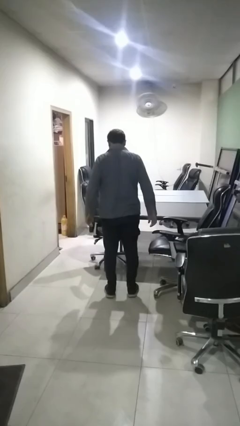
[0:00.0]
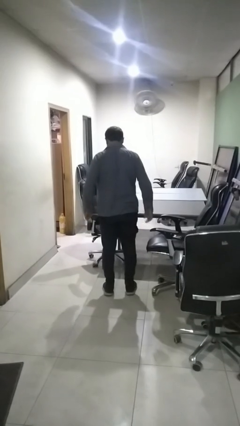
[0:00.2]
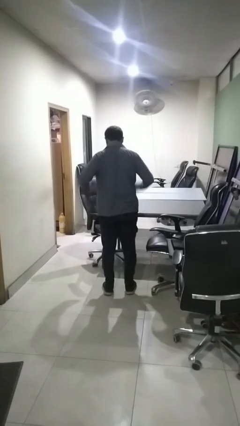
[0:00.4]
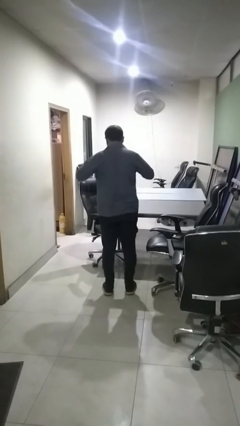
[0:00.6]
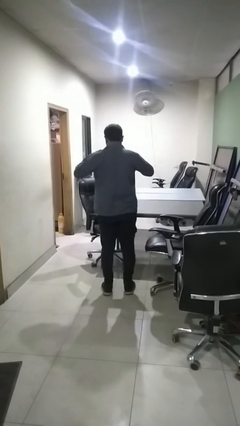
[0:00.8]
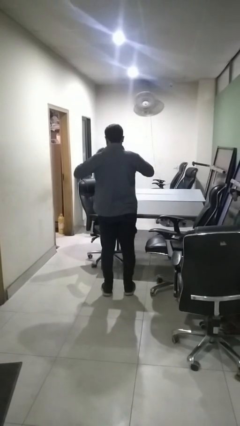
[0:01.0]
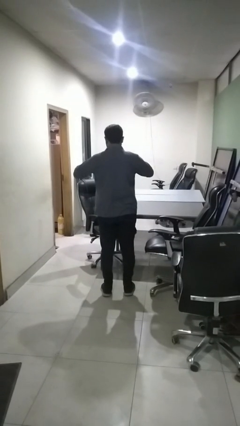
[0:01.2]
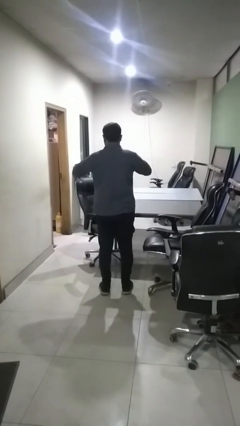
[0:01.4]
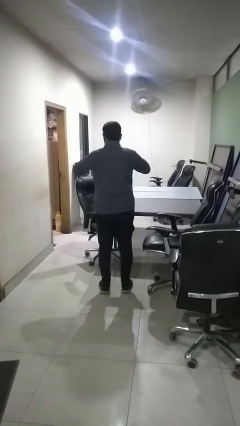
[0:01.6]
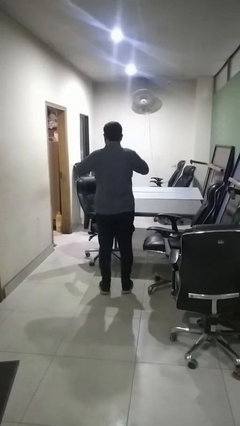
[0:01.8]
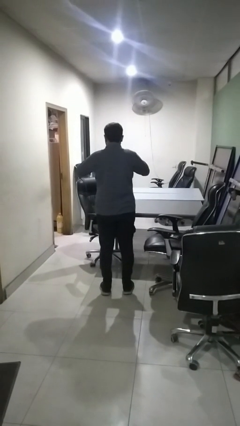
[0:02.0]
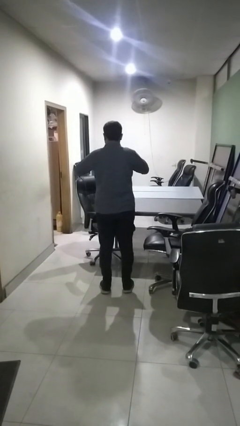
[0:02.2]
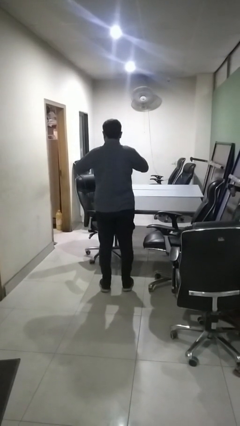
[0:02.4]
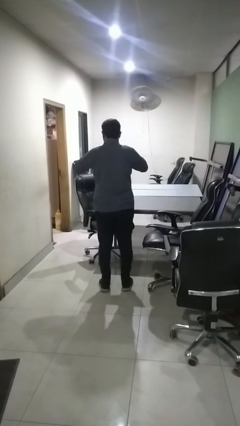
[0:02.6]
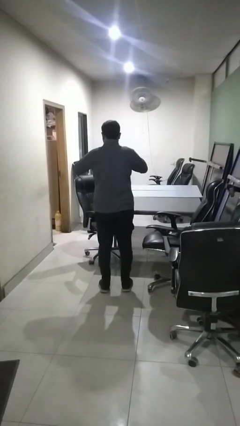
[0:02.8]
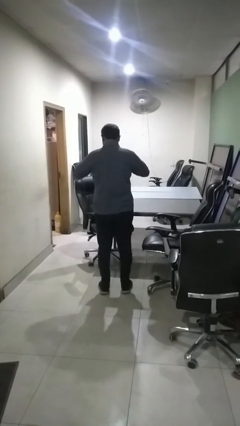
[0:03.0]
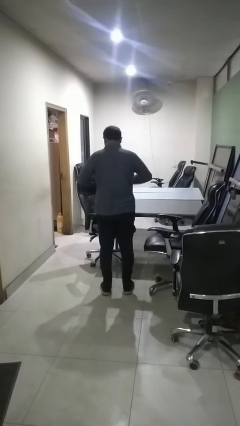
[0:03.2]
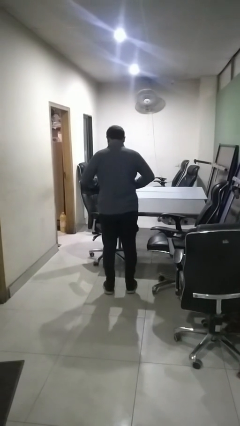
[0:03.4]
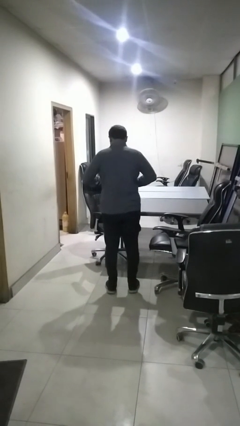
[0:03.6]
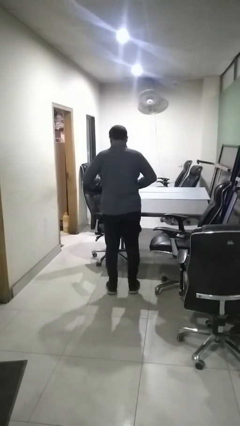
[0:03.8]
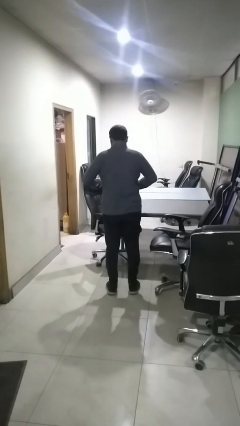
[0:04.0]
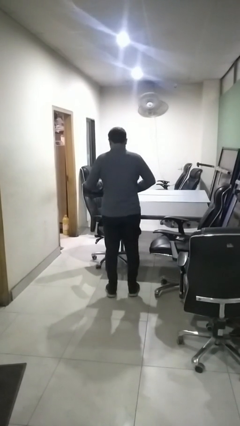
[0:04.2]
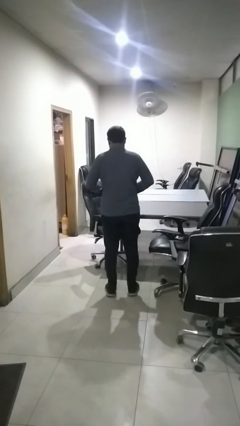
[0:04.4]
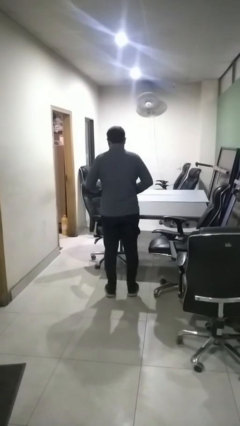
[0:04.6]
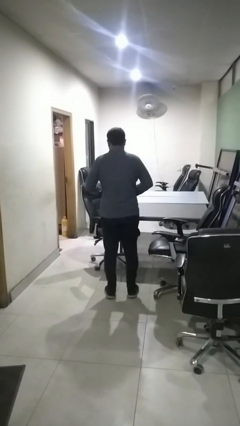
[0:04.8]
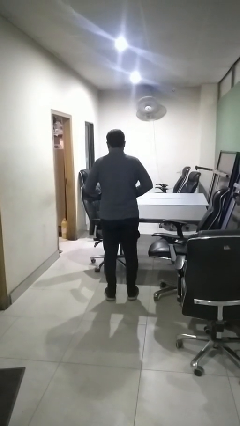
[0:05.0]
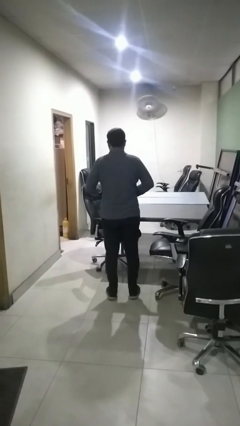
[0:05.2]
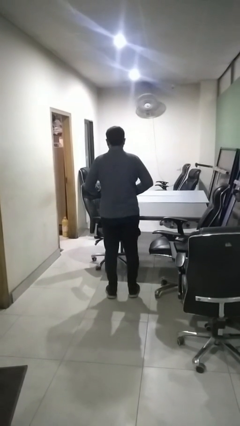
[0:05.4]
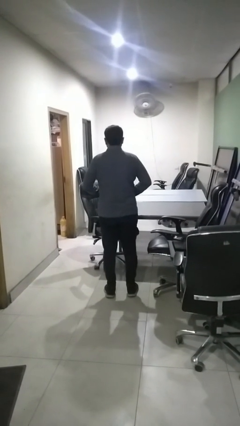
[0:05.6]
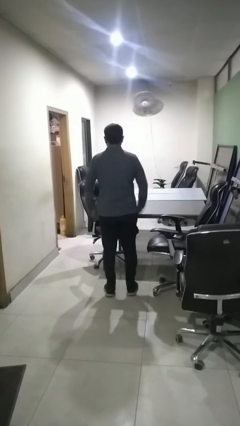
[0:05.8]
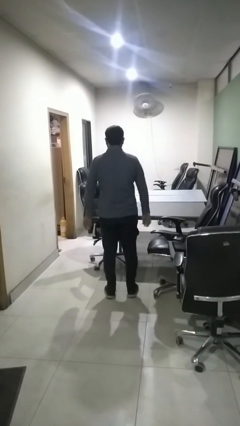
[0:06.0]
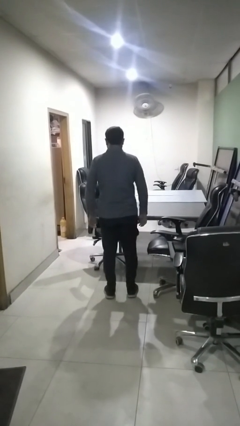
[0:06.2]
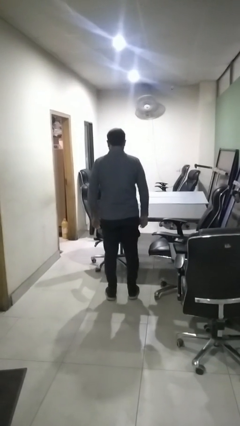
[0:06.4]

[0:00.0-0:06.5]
person buttons shirt

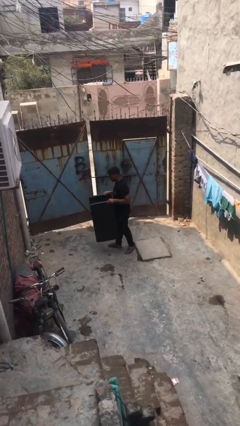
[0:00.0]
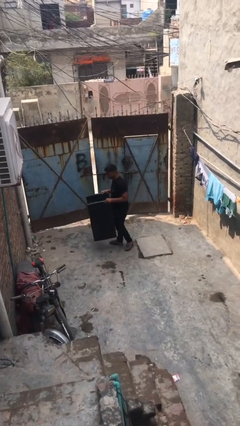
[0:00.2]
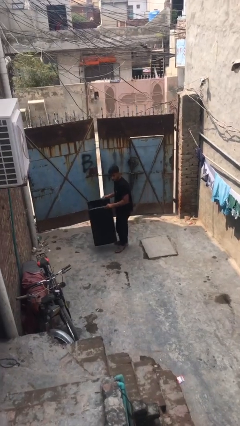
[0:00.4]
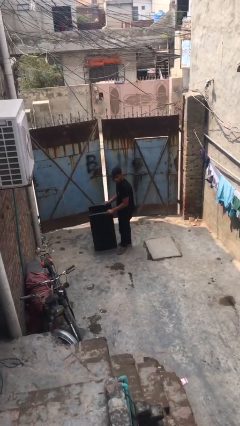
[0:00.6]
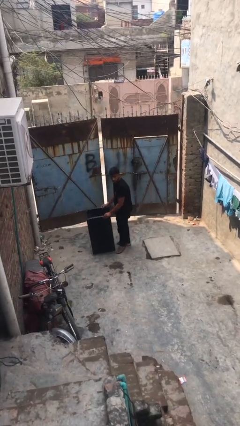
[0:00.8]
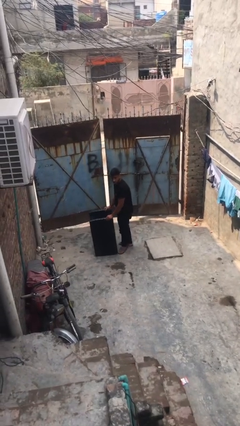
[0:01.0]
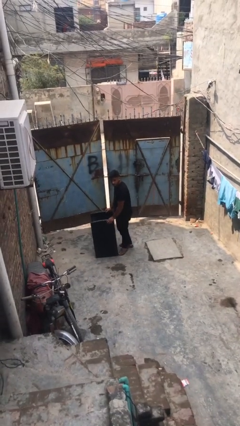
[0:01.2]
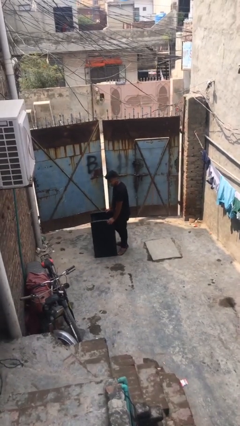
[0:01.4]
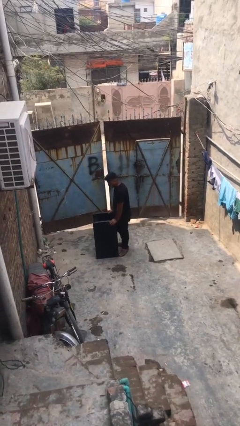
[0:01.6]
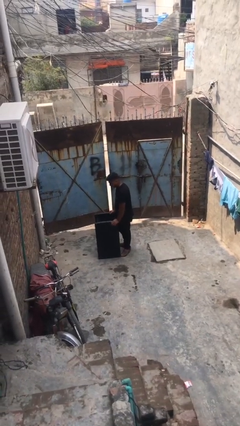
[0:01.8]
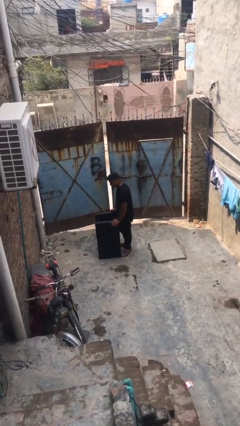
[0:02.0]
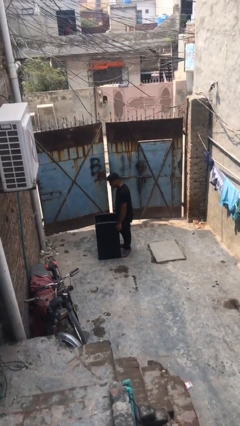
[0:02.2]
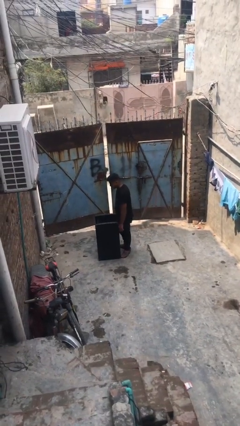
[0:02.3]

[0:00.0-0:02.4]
person puts down object on floor

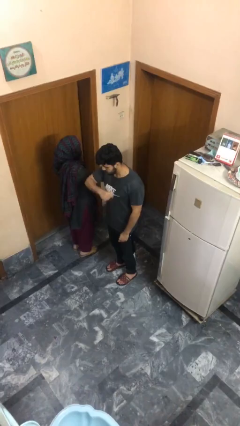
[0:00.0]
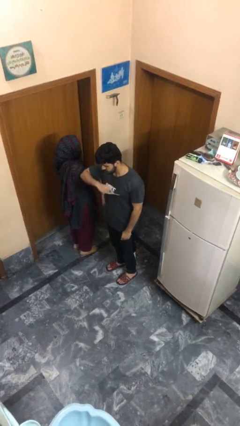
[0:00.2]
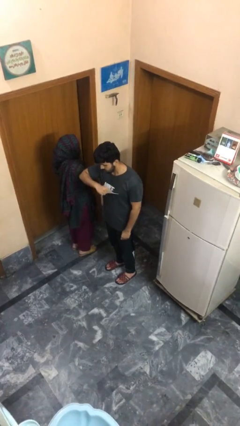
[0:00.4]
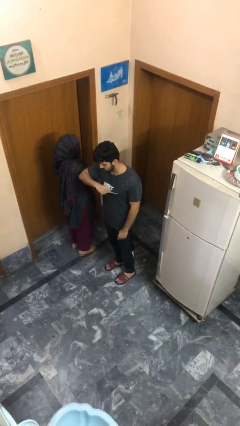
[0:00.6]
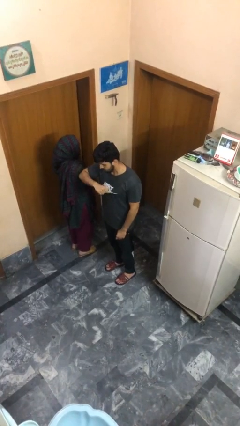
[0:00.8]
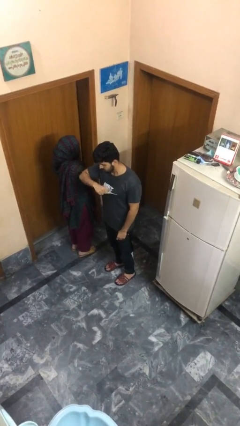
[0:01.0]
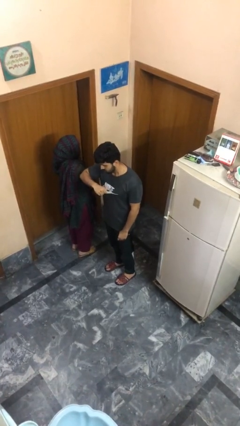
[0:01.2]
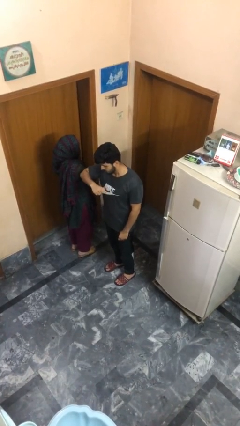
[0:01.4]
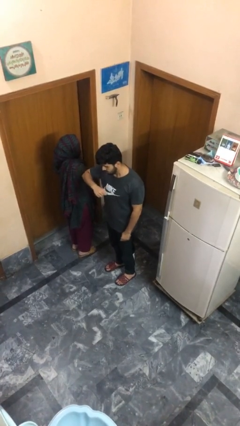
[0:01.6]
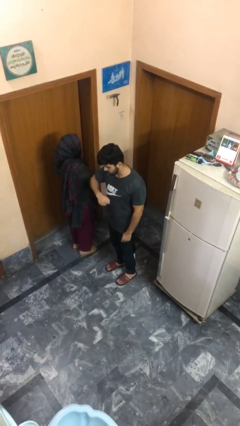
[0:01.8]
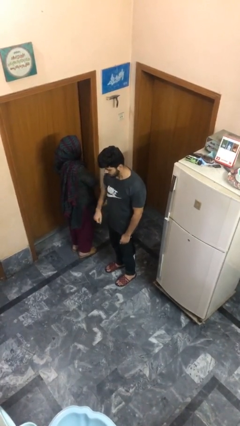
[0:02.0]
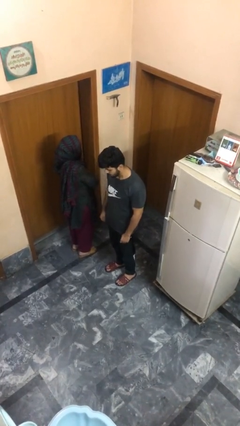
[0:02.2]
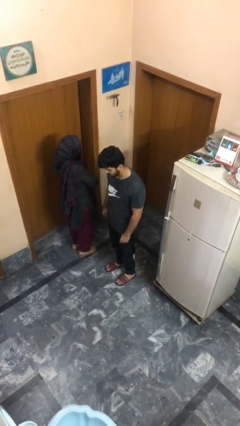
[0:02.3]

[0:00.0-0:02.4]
person nudges person with elbow

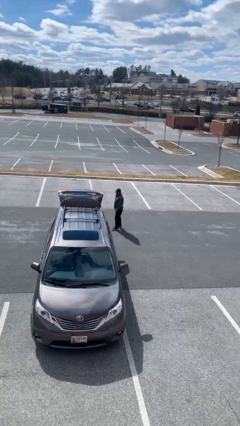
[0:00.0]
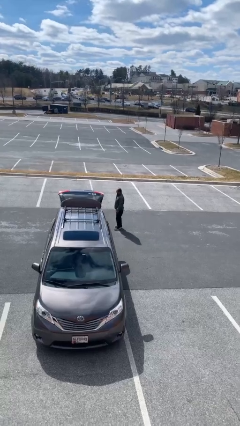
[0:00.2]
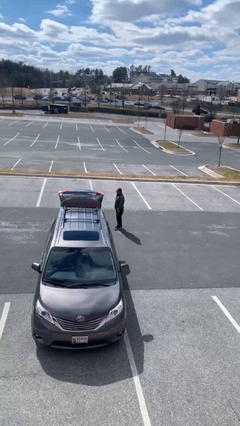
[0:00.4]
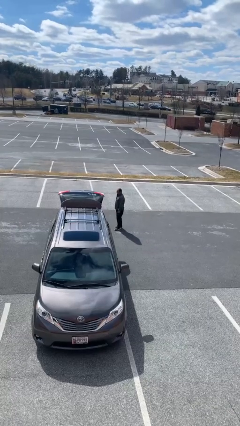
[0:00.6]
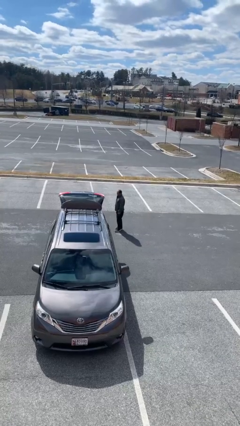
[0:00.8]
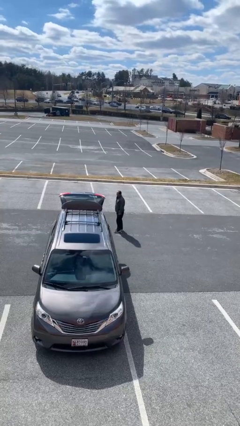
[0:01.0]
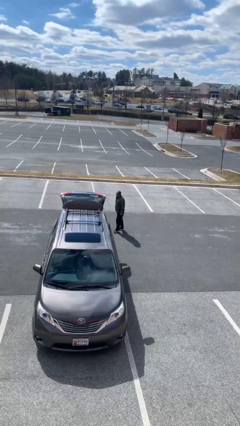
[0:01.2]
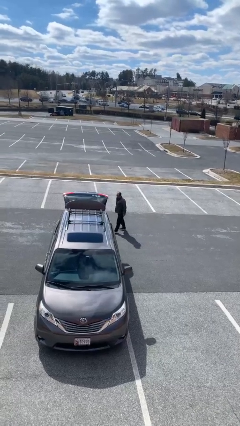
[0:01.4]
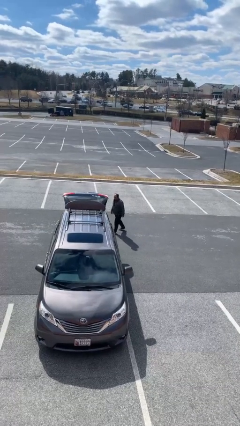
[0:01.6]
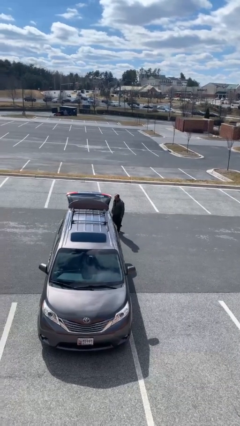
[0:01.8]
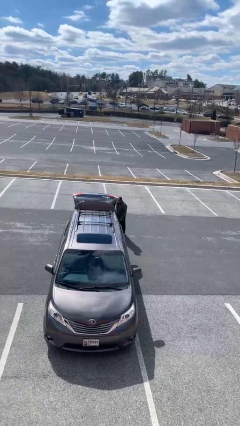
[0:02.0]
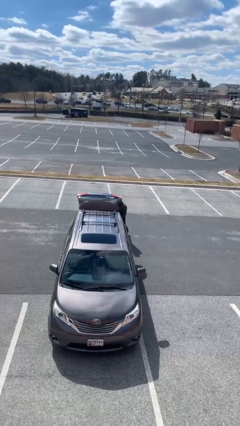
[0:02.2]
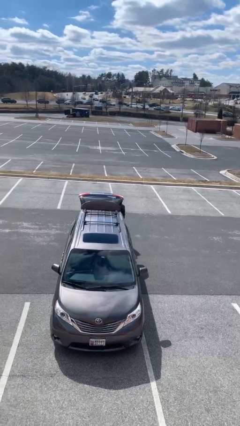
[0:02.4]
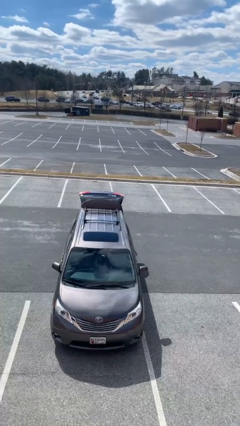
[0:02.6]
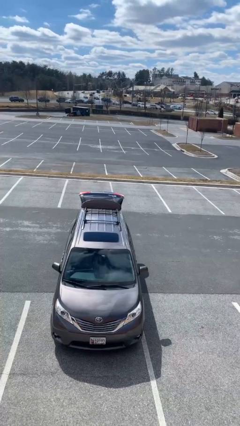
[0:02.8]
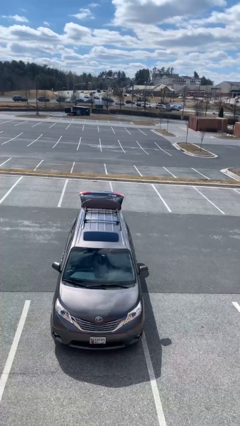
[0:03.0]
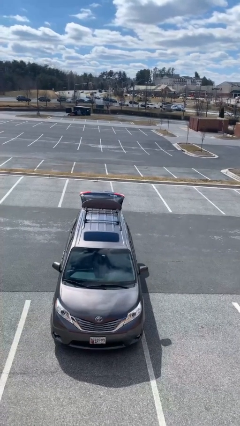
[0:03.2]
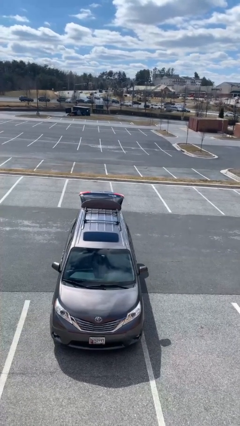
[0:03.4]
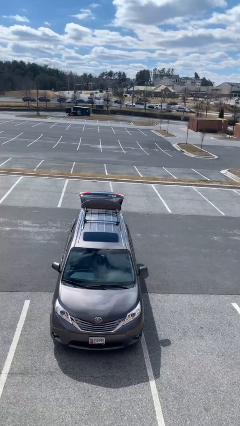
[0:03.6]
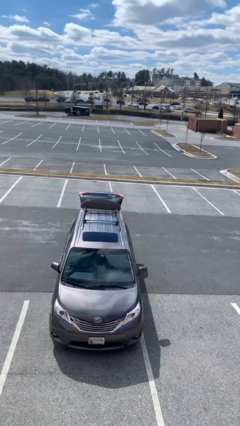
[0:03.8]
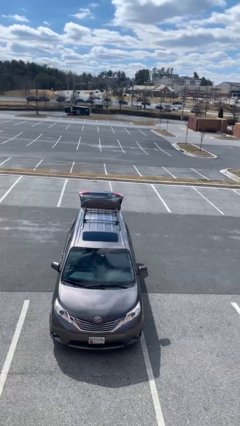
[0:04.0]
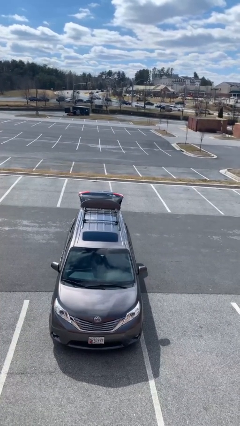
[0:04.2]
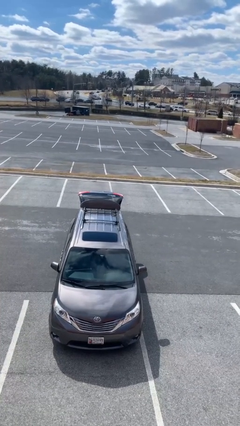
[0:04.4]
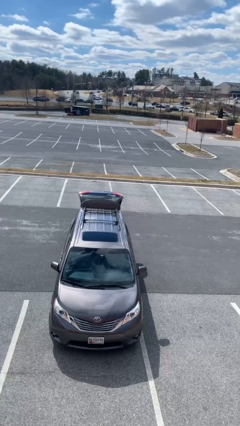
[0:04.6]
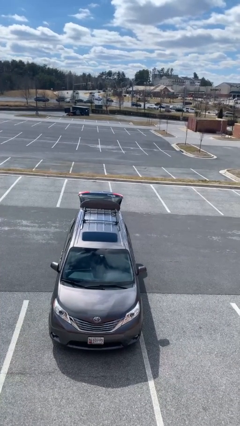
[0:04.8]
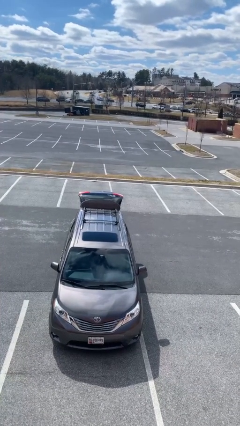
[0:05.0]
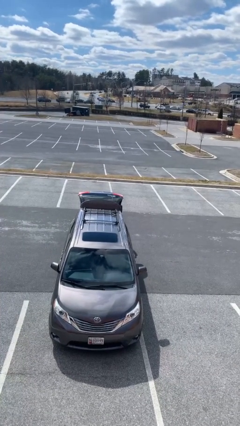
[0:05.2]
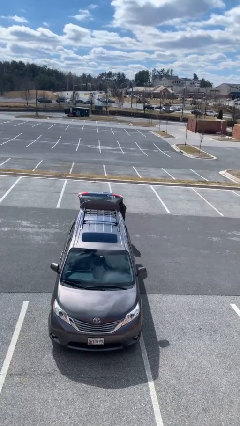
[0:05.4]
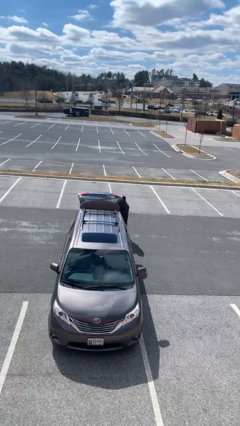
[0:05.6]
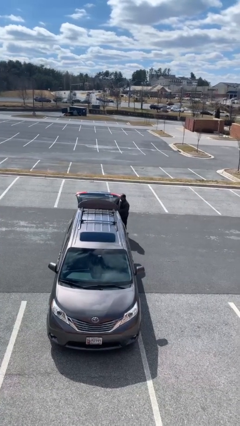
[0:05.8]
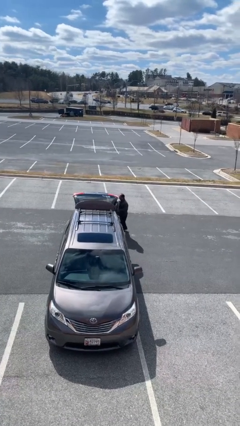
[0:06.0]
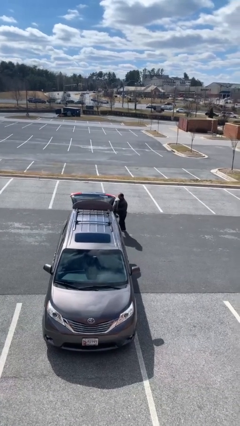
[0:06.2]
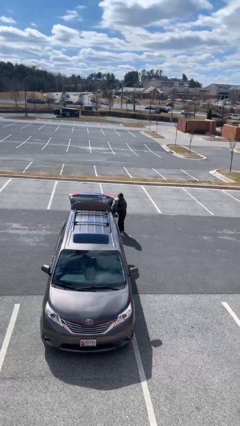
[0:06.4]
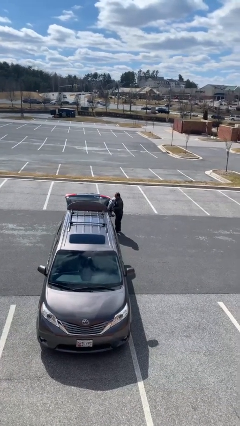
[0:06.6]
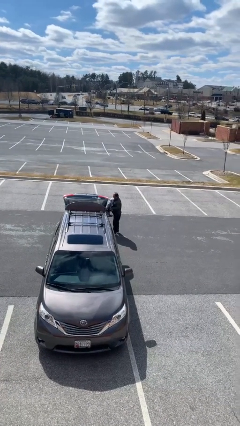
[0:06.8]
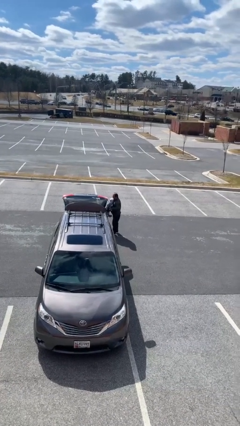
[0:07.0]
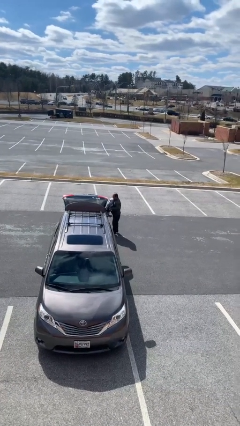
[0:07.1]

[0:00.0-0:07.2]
person unloads car
